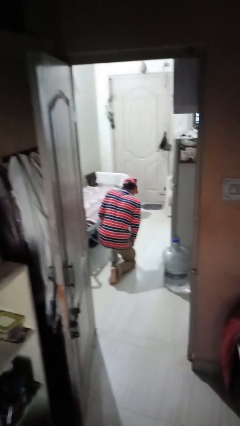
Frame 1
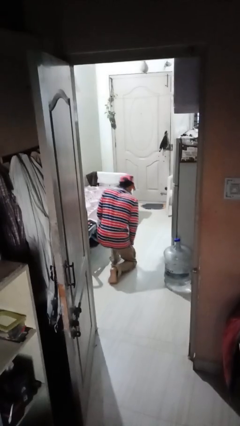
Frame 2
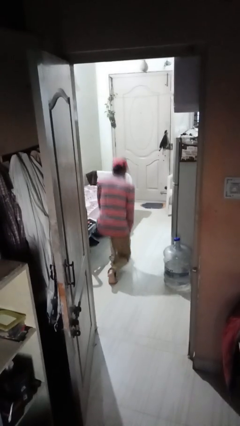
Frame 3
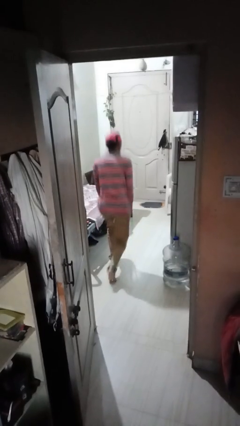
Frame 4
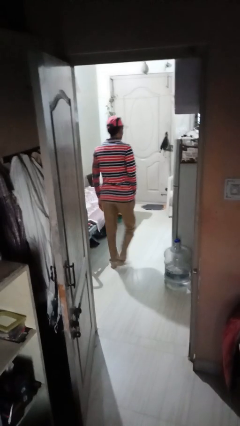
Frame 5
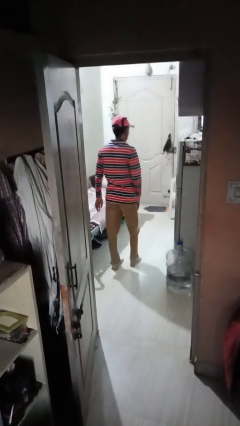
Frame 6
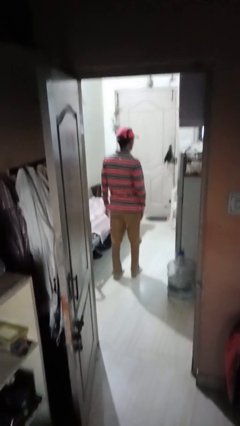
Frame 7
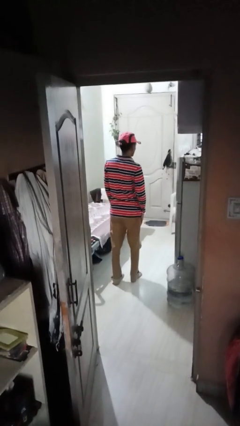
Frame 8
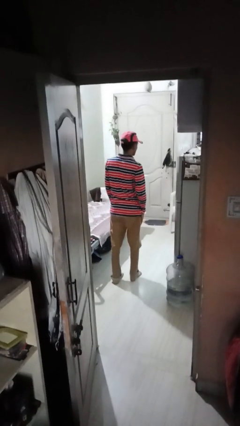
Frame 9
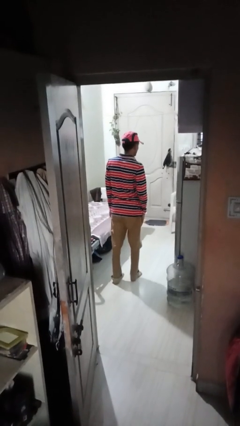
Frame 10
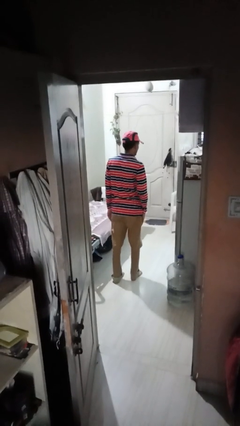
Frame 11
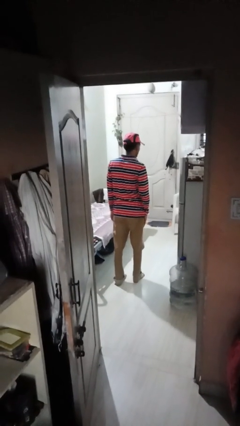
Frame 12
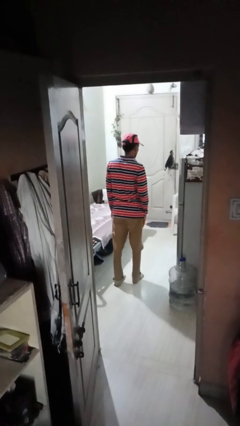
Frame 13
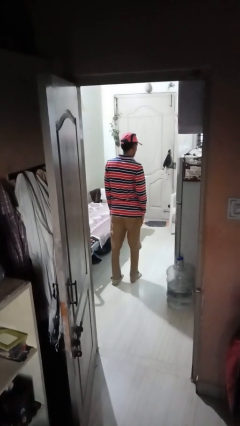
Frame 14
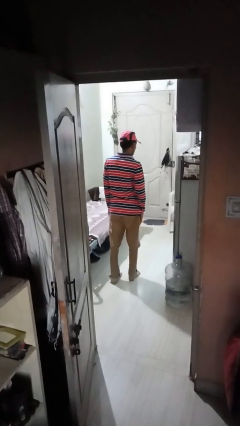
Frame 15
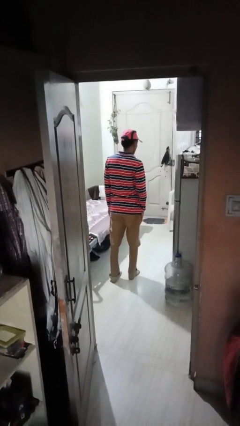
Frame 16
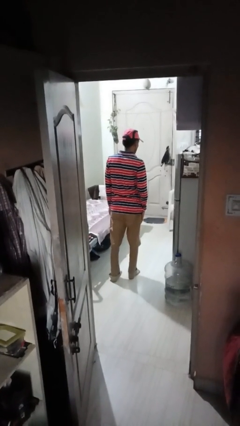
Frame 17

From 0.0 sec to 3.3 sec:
person stands up from floor

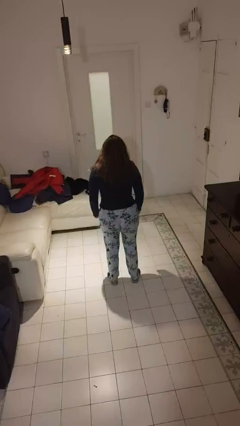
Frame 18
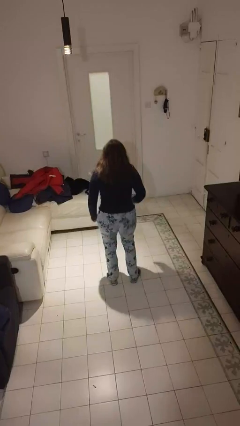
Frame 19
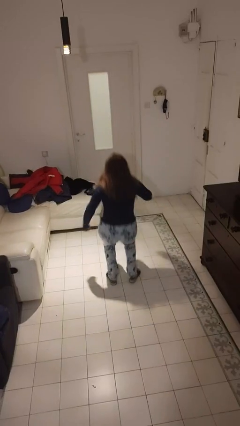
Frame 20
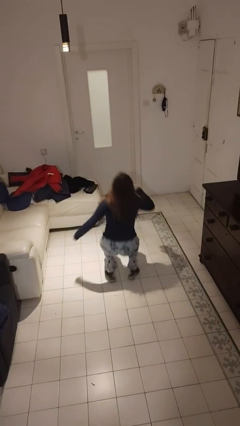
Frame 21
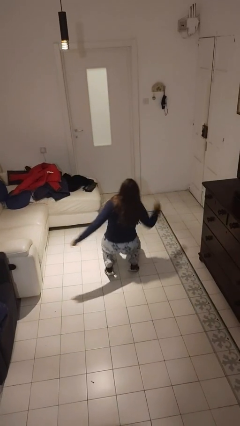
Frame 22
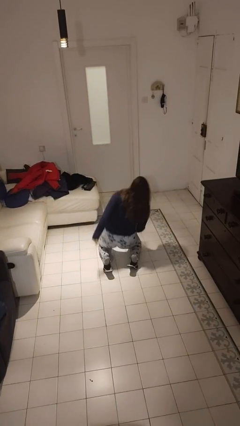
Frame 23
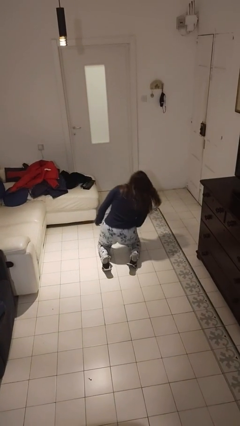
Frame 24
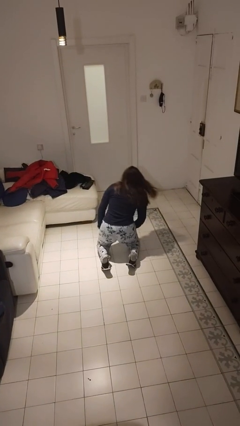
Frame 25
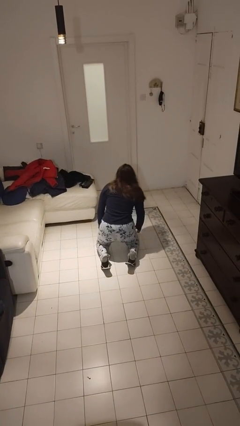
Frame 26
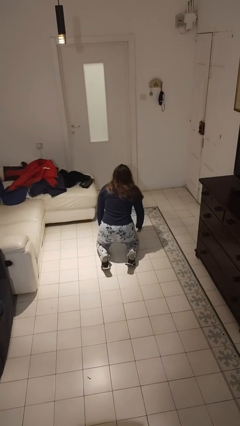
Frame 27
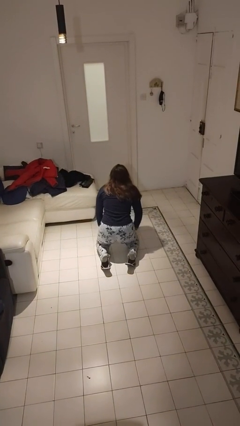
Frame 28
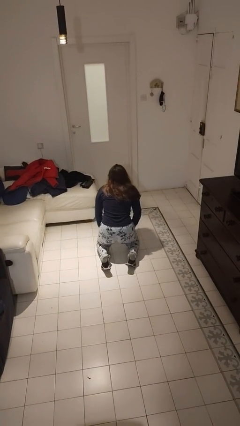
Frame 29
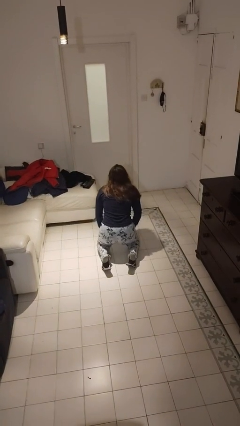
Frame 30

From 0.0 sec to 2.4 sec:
person falls while standing

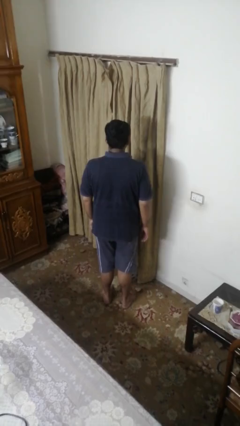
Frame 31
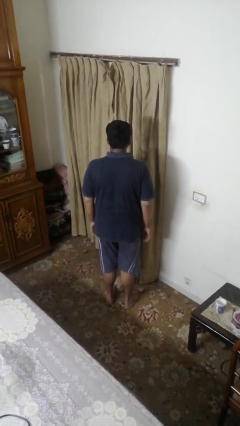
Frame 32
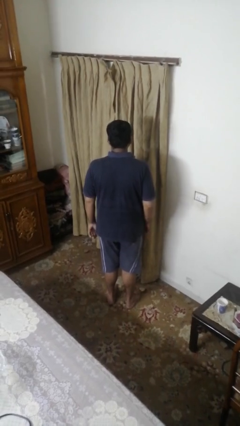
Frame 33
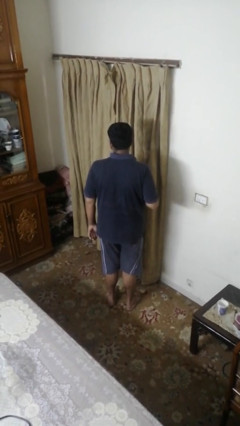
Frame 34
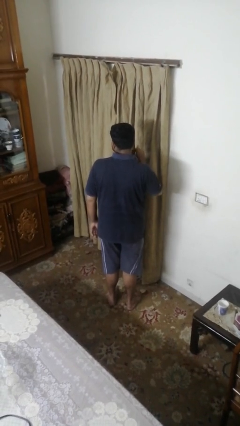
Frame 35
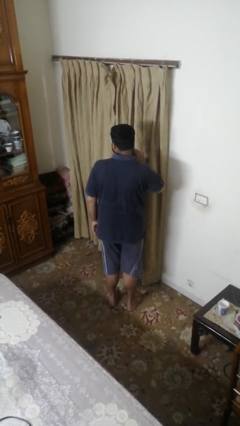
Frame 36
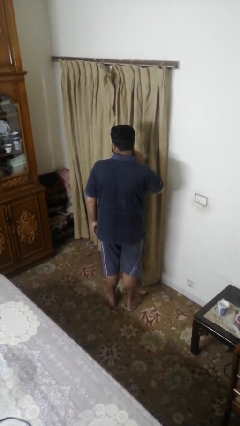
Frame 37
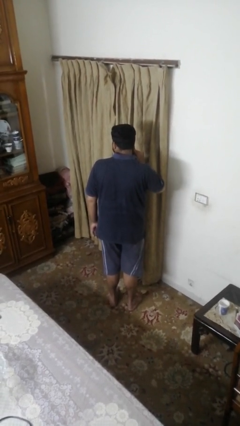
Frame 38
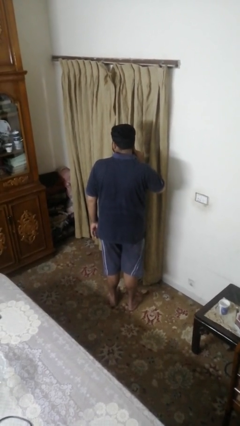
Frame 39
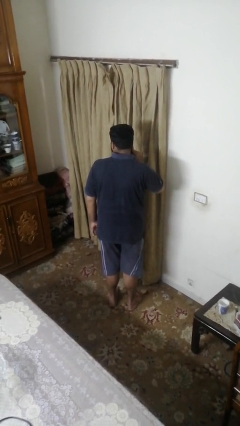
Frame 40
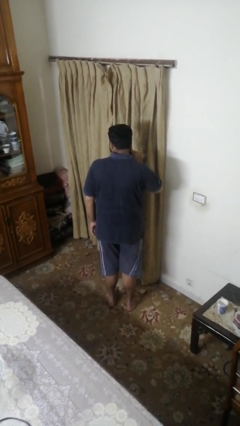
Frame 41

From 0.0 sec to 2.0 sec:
person gestures listen closely

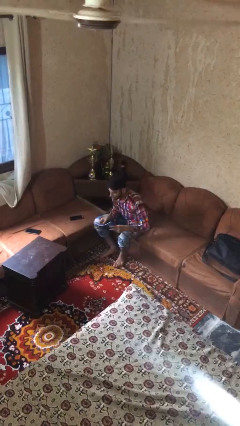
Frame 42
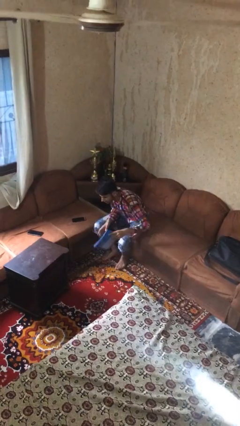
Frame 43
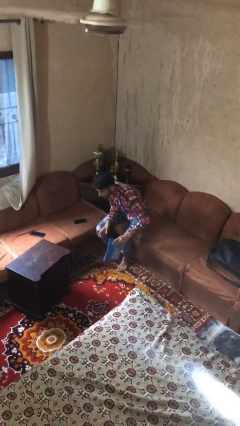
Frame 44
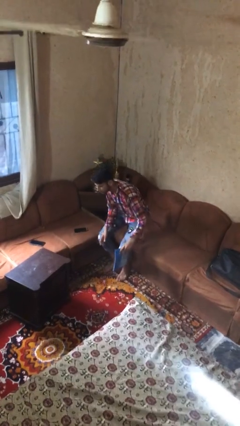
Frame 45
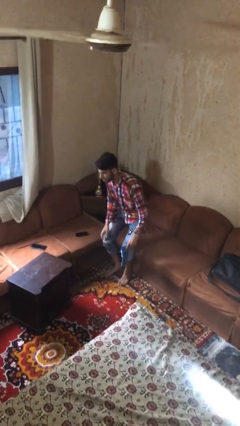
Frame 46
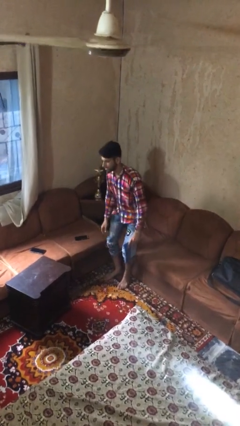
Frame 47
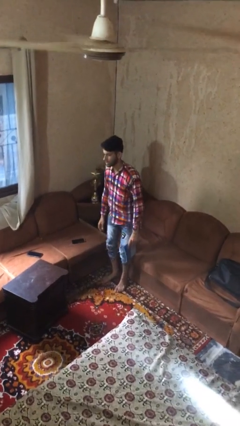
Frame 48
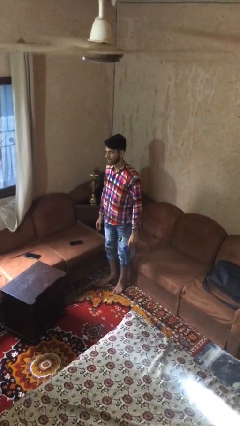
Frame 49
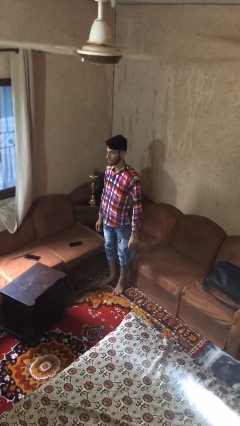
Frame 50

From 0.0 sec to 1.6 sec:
person stands up

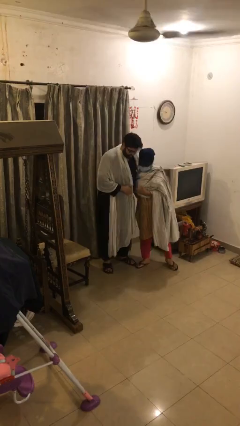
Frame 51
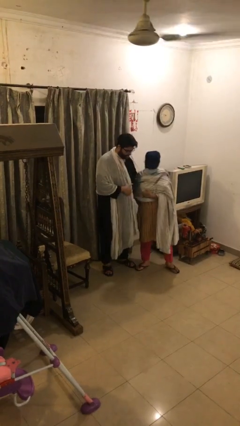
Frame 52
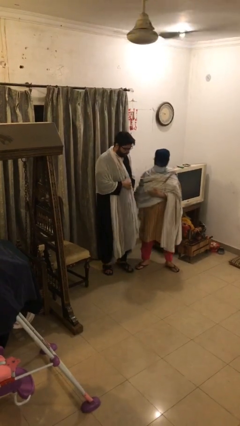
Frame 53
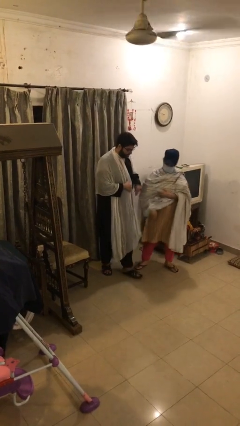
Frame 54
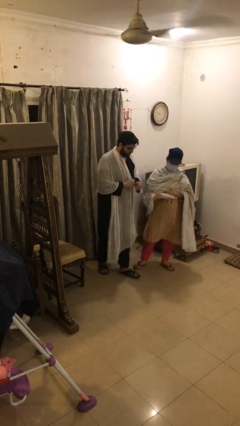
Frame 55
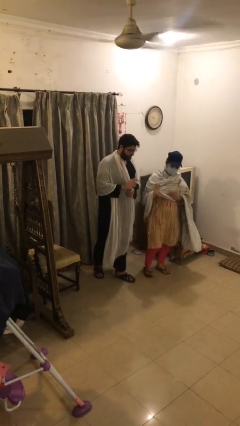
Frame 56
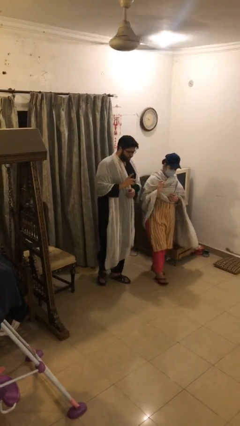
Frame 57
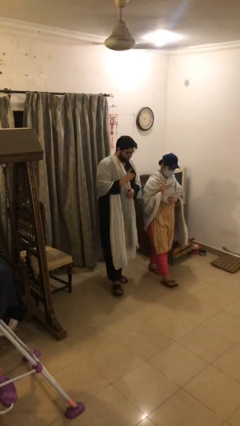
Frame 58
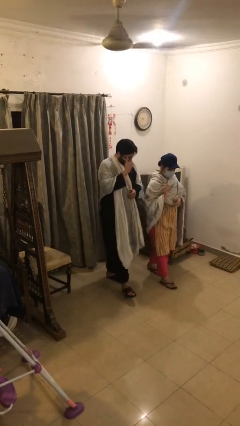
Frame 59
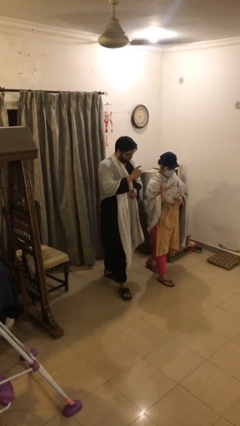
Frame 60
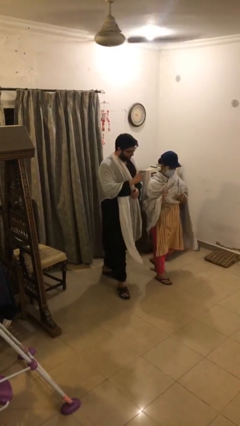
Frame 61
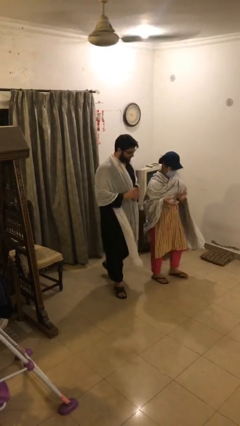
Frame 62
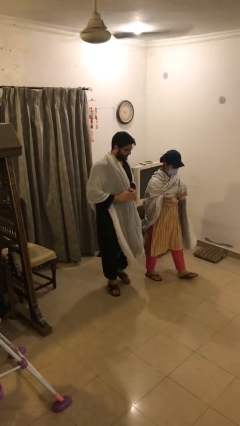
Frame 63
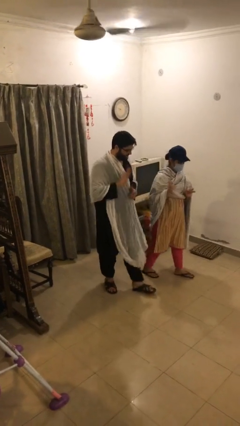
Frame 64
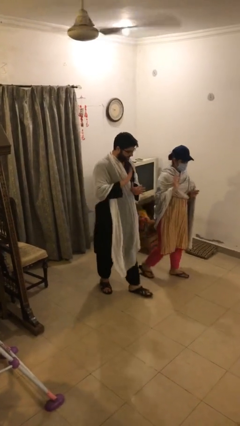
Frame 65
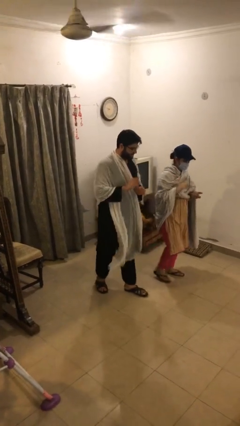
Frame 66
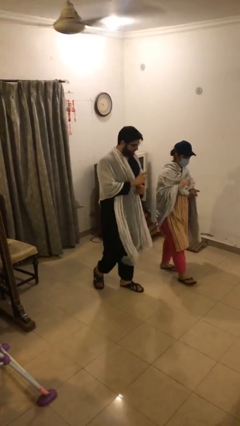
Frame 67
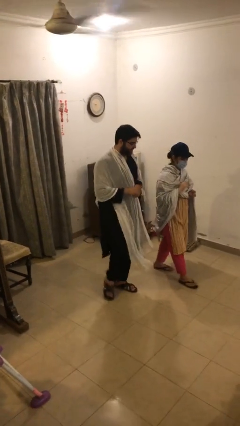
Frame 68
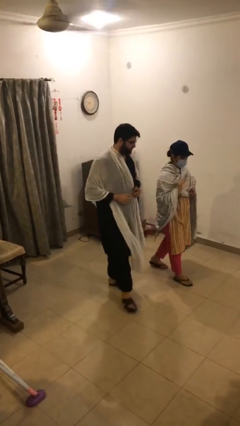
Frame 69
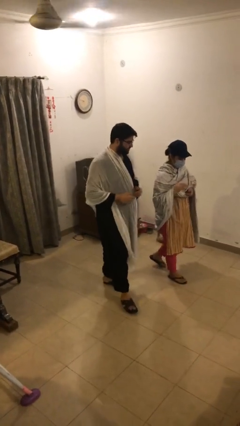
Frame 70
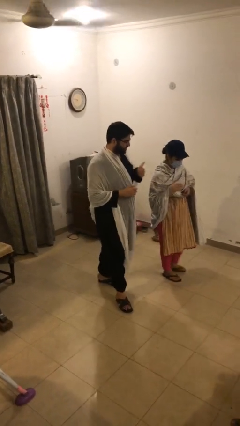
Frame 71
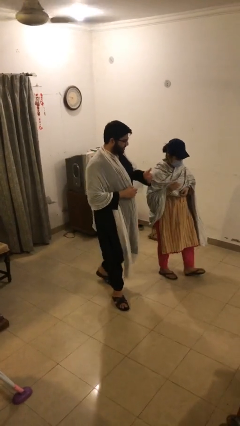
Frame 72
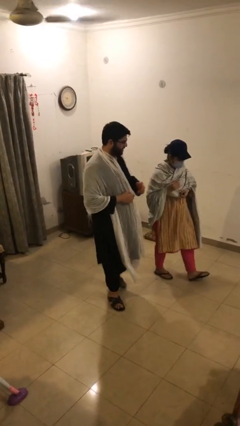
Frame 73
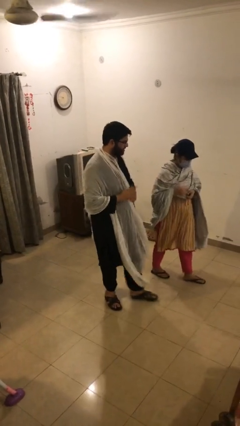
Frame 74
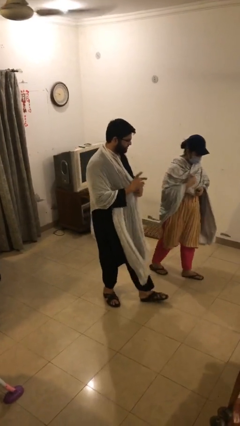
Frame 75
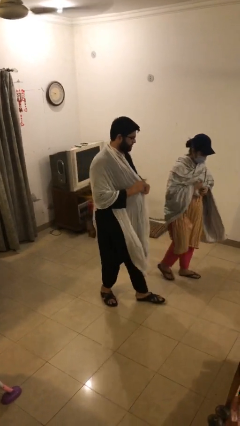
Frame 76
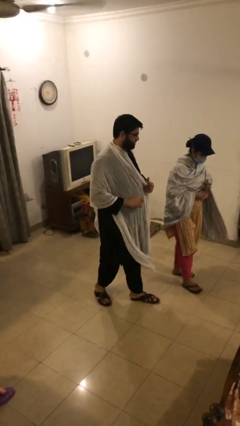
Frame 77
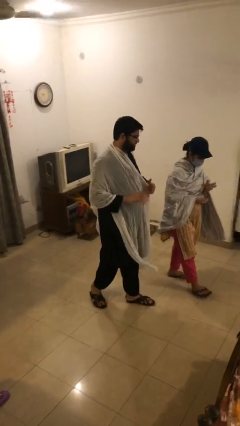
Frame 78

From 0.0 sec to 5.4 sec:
person talks to person

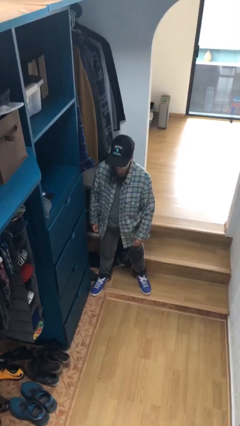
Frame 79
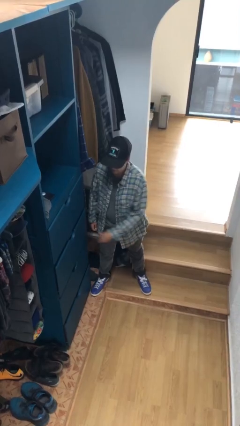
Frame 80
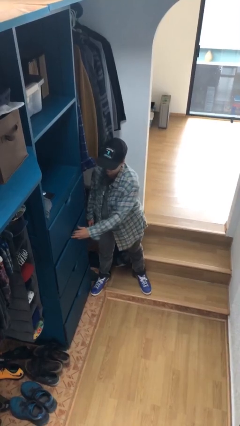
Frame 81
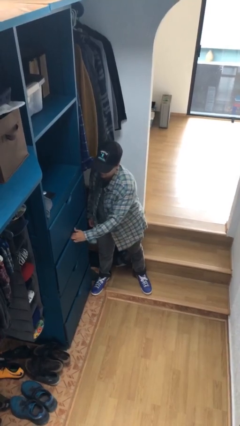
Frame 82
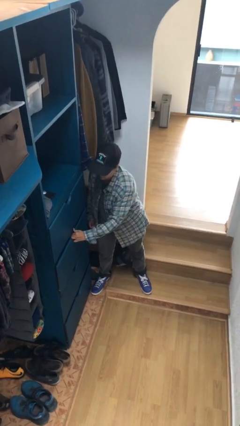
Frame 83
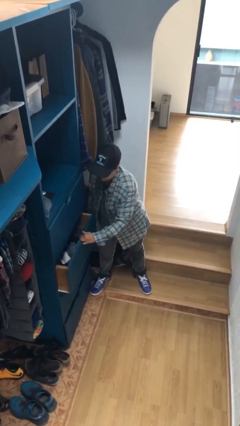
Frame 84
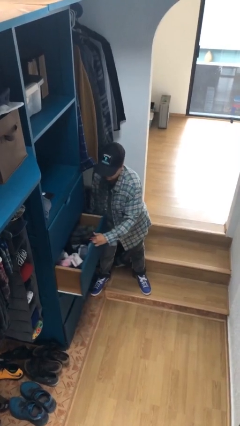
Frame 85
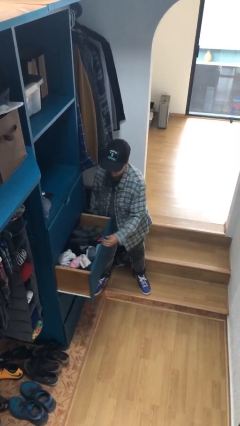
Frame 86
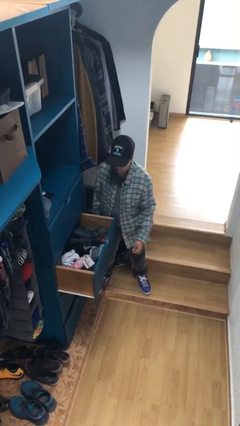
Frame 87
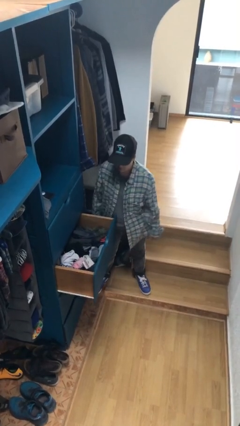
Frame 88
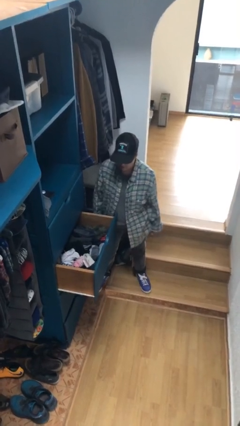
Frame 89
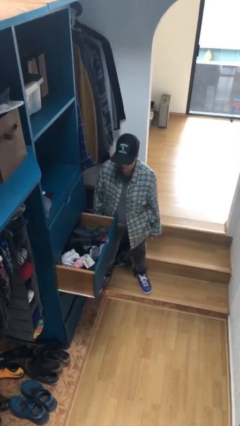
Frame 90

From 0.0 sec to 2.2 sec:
person opens dresser drawer

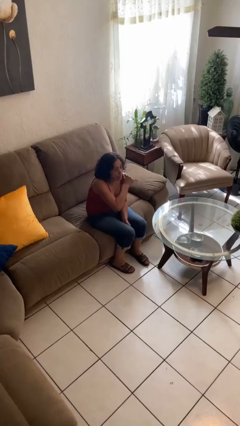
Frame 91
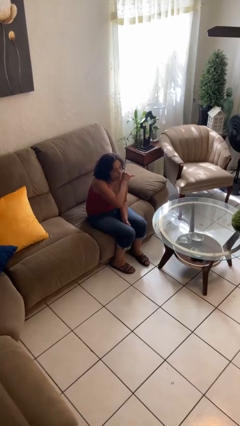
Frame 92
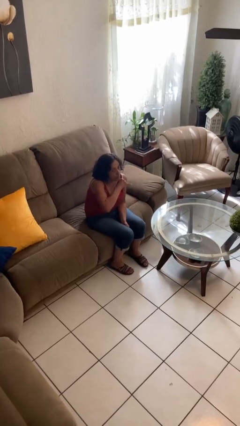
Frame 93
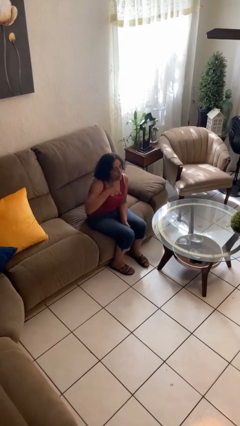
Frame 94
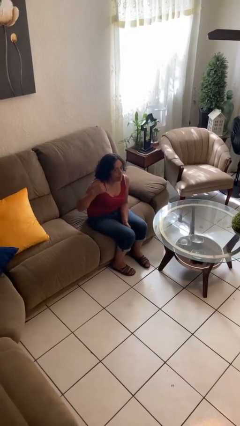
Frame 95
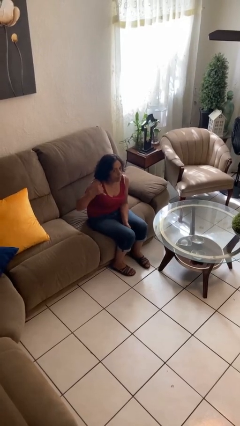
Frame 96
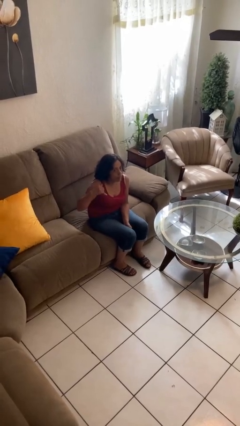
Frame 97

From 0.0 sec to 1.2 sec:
person gestures cut
